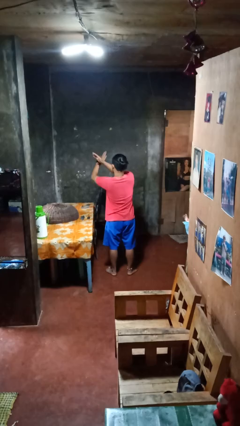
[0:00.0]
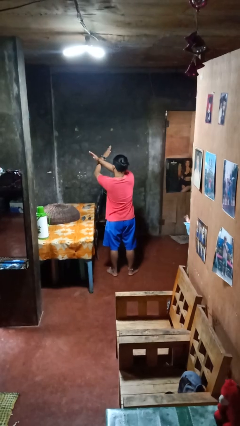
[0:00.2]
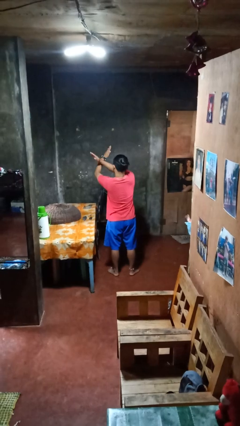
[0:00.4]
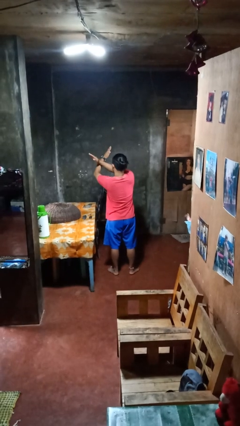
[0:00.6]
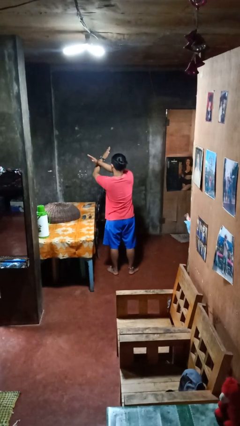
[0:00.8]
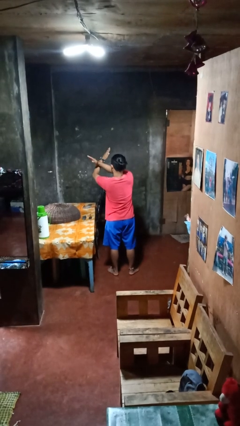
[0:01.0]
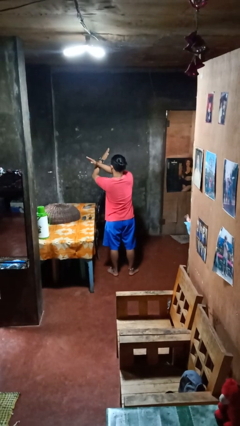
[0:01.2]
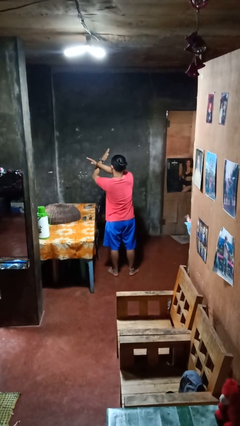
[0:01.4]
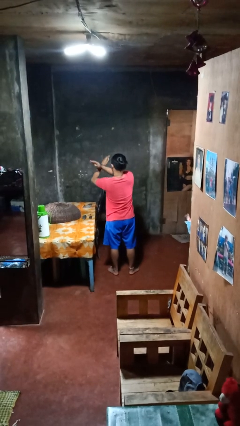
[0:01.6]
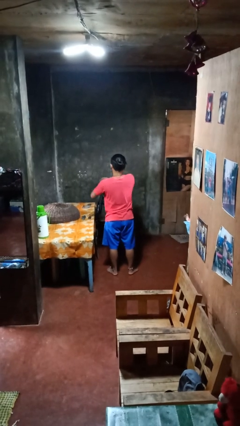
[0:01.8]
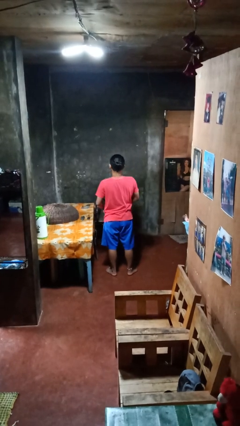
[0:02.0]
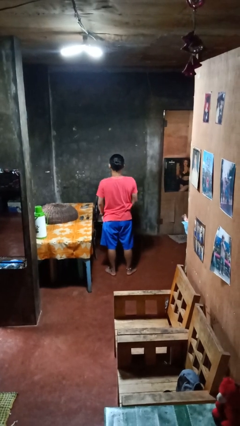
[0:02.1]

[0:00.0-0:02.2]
person gestures arms x

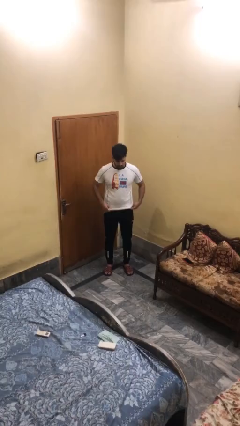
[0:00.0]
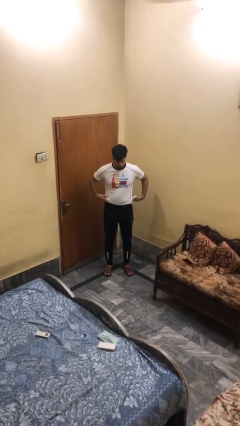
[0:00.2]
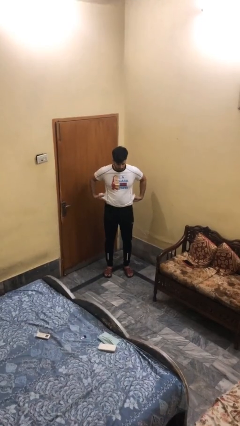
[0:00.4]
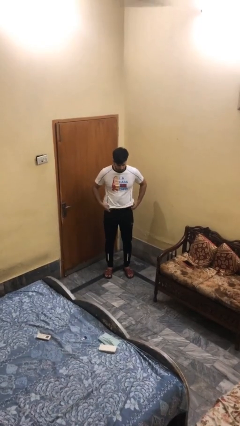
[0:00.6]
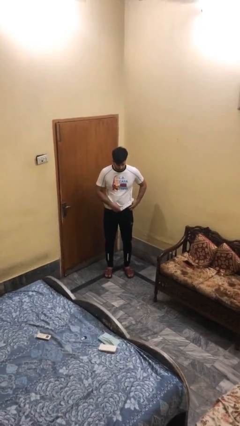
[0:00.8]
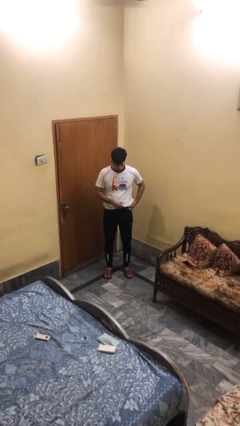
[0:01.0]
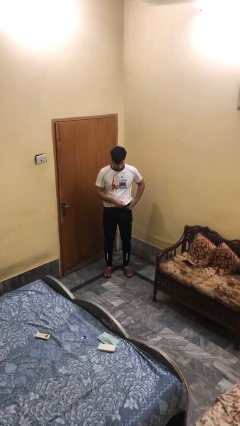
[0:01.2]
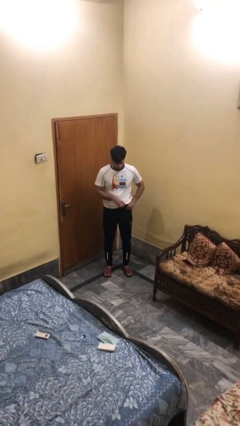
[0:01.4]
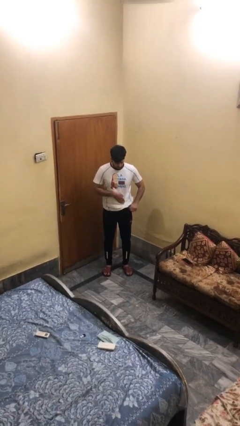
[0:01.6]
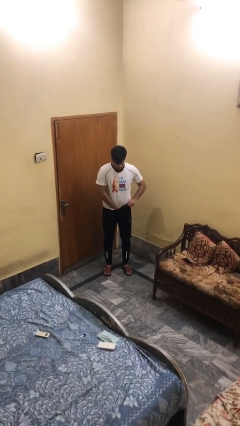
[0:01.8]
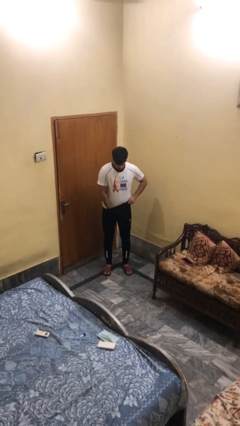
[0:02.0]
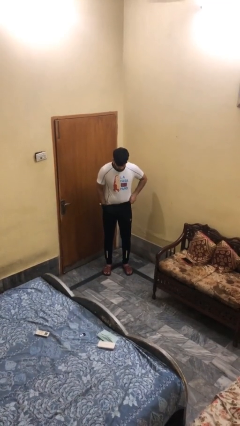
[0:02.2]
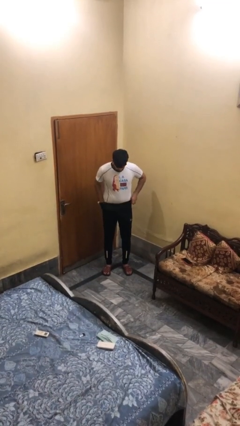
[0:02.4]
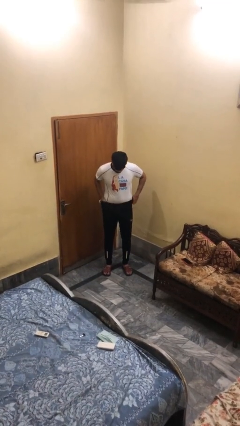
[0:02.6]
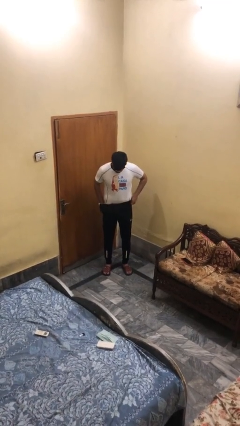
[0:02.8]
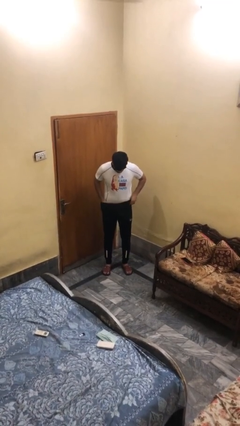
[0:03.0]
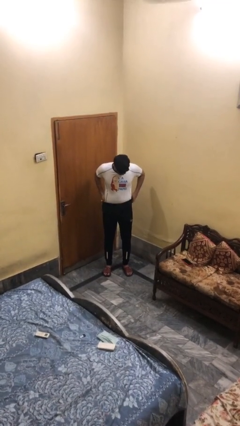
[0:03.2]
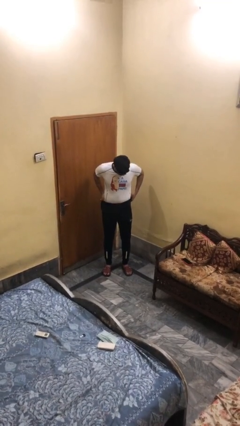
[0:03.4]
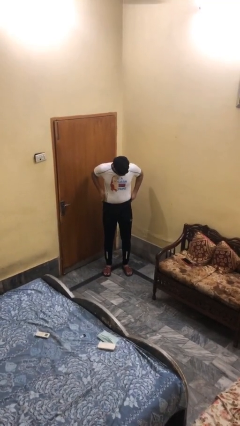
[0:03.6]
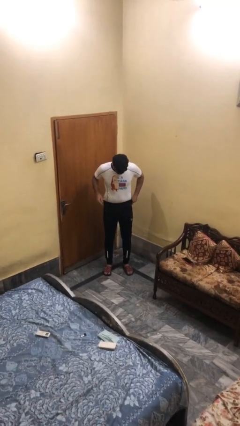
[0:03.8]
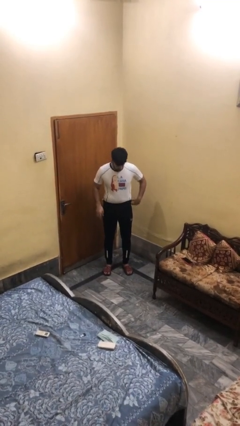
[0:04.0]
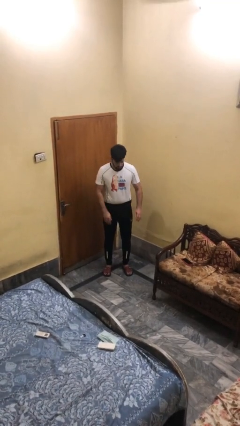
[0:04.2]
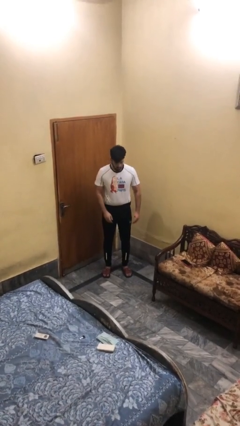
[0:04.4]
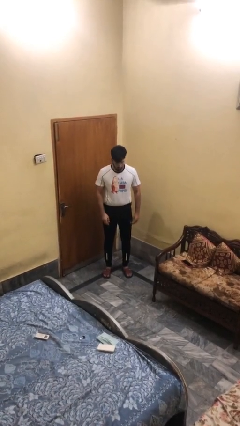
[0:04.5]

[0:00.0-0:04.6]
person tucks in shirt

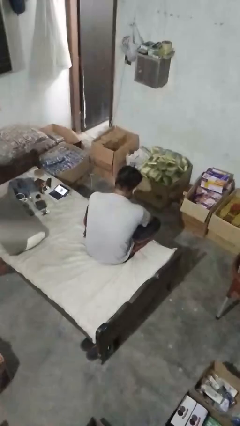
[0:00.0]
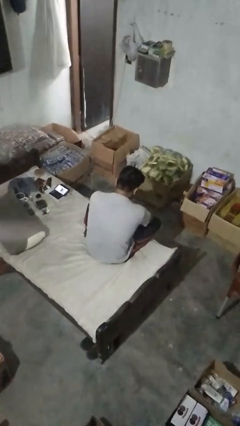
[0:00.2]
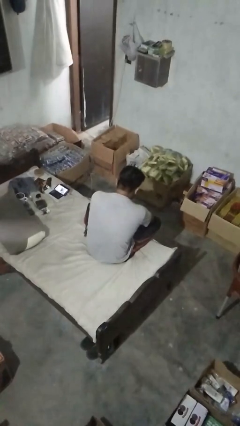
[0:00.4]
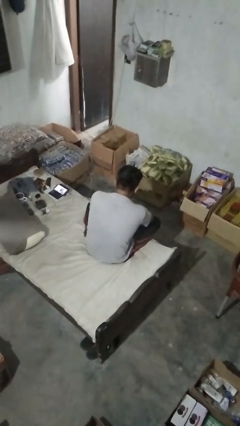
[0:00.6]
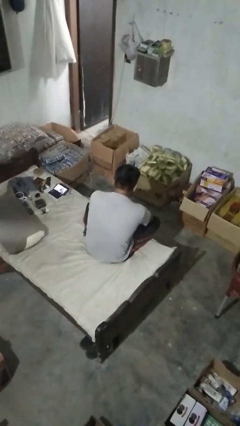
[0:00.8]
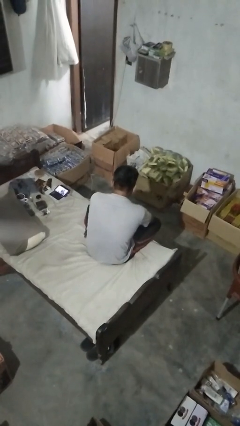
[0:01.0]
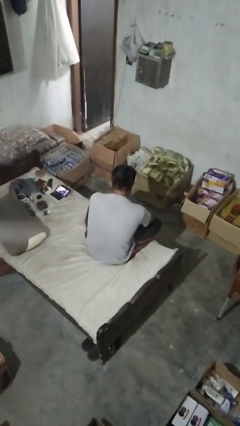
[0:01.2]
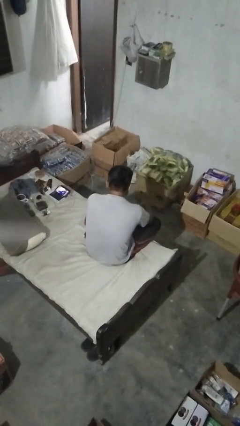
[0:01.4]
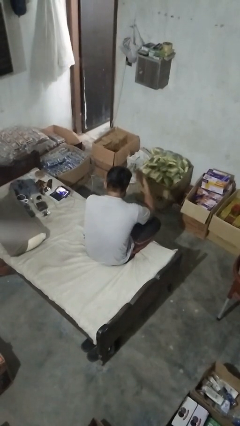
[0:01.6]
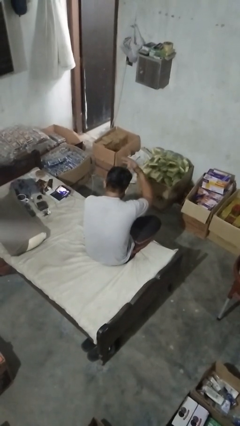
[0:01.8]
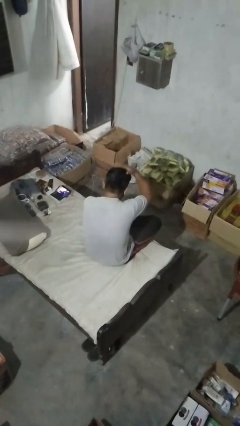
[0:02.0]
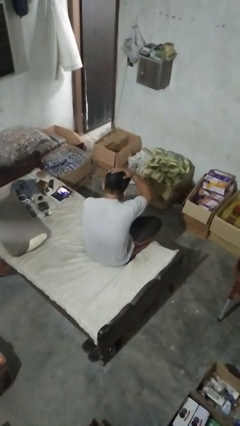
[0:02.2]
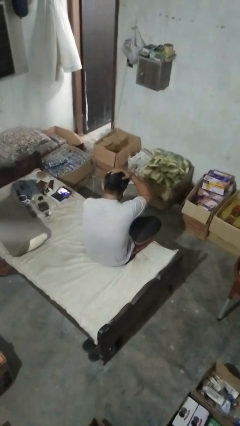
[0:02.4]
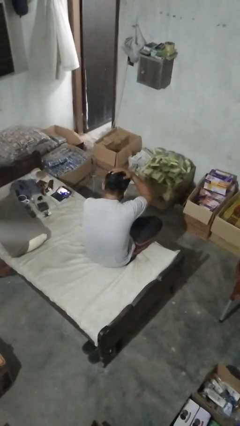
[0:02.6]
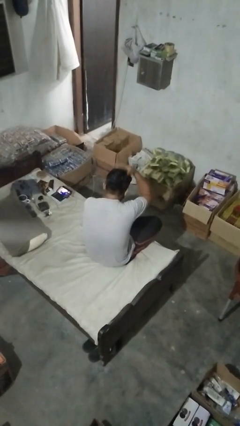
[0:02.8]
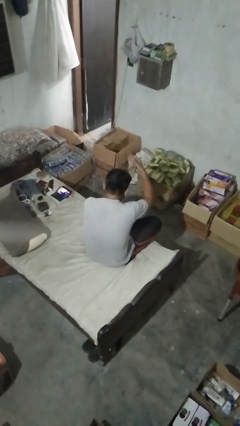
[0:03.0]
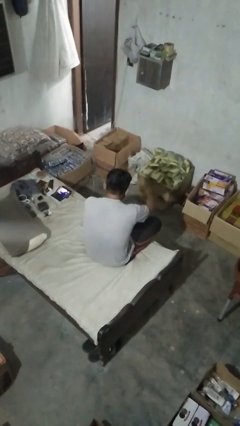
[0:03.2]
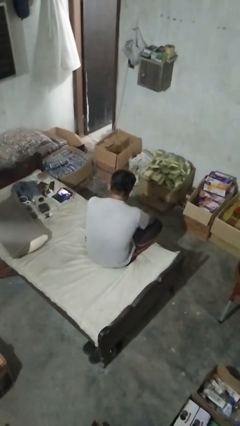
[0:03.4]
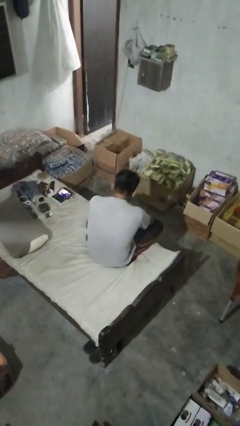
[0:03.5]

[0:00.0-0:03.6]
person pats head

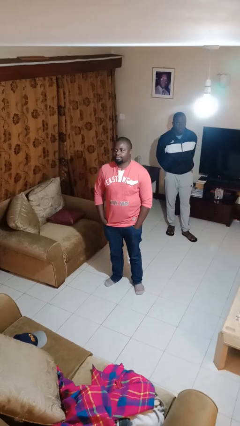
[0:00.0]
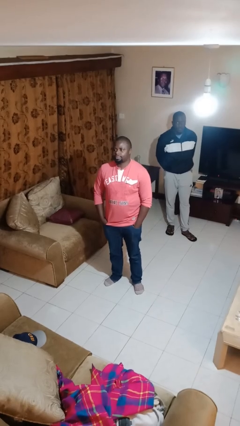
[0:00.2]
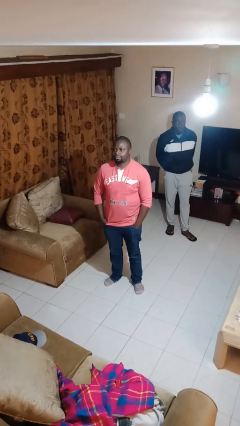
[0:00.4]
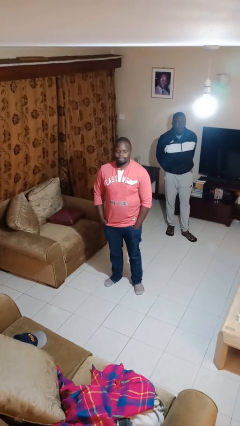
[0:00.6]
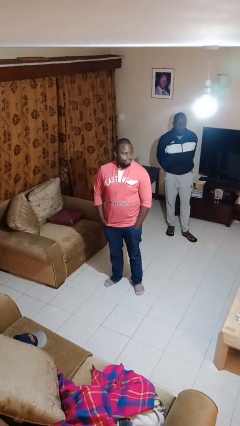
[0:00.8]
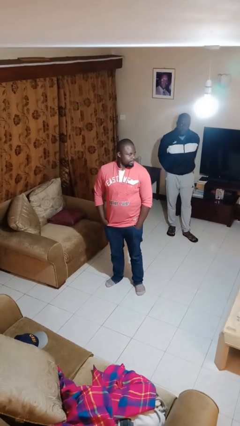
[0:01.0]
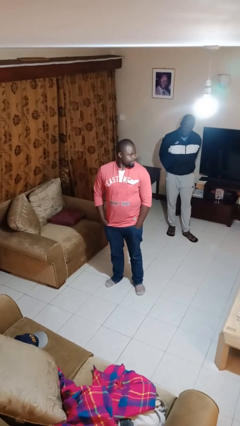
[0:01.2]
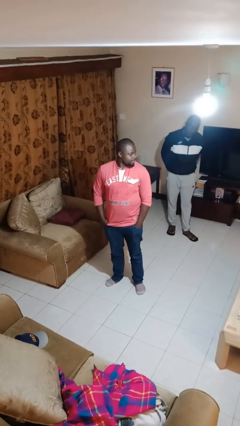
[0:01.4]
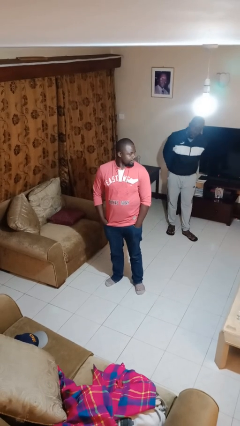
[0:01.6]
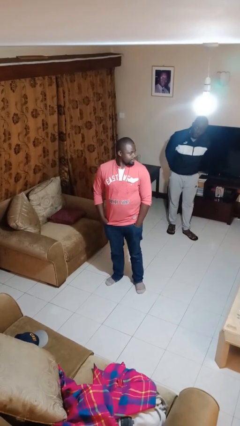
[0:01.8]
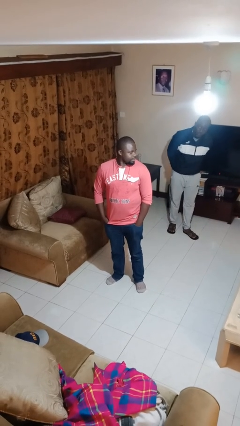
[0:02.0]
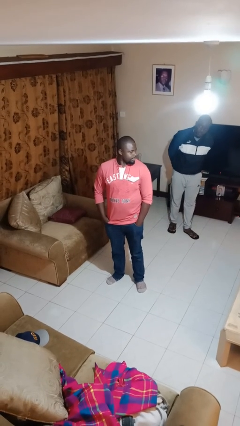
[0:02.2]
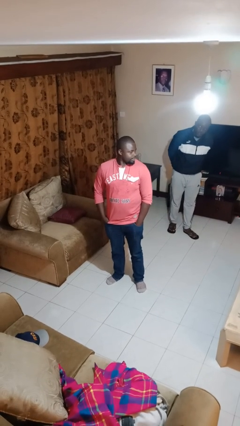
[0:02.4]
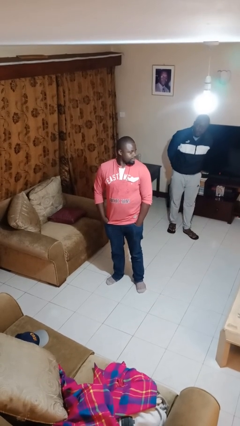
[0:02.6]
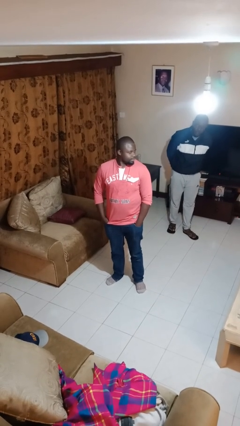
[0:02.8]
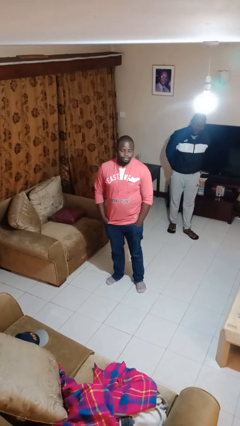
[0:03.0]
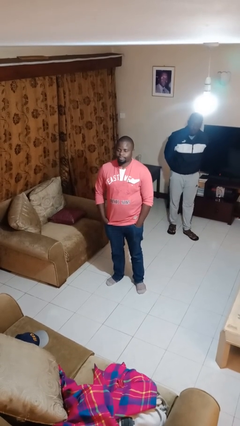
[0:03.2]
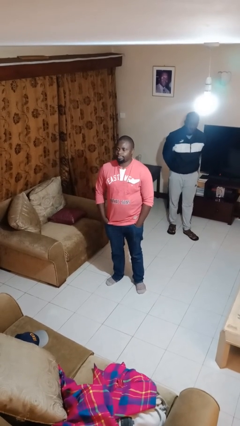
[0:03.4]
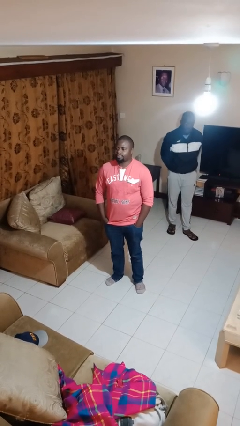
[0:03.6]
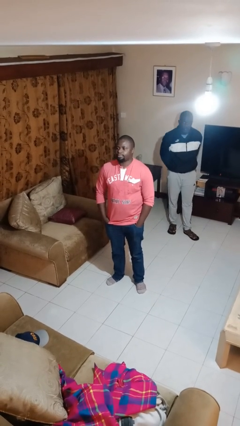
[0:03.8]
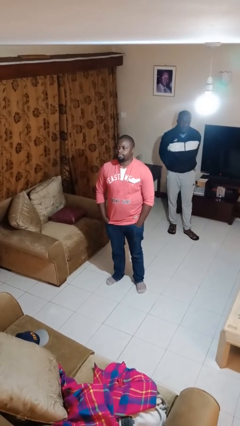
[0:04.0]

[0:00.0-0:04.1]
person looks over shoulder

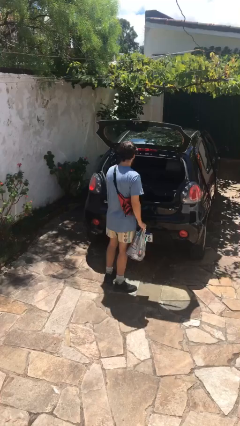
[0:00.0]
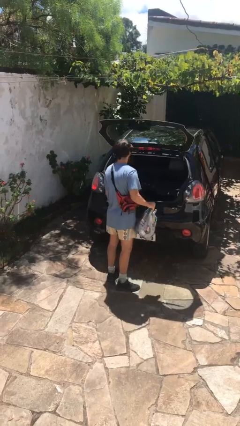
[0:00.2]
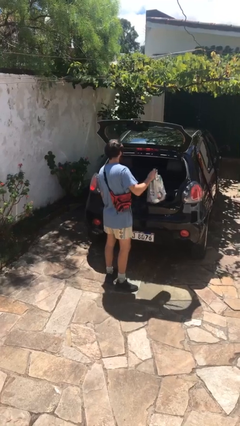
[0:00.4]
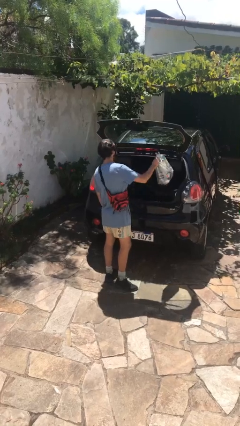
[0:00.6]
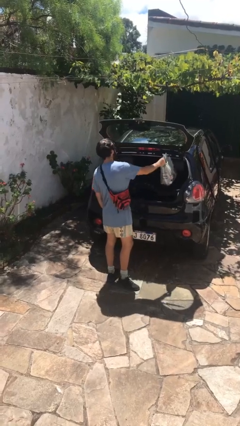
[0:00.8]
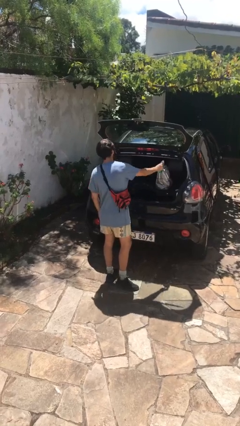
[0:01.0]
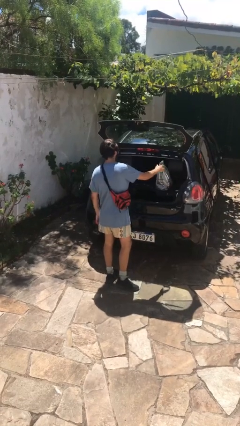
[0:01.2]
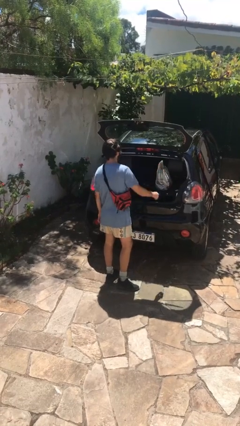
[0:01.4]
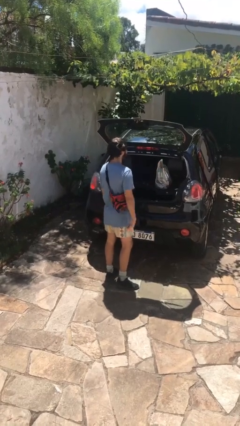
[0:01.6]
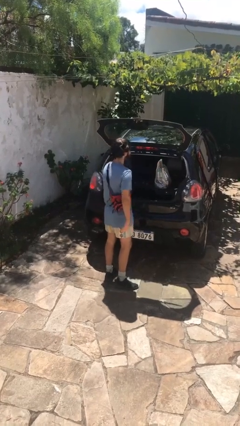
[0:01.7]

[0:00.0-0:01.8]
person loads car

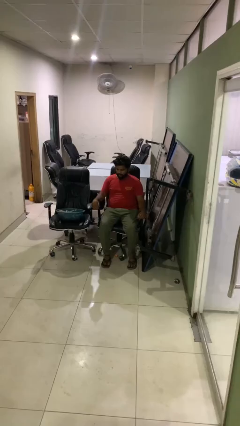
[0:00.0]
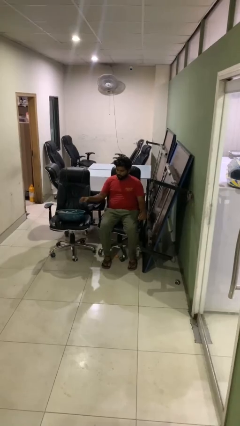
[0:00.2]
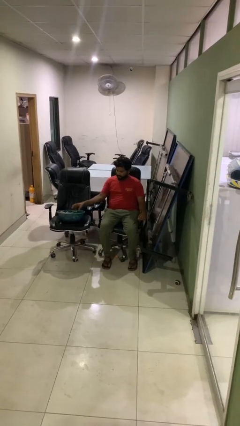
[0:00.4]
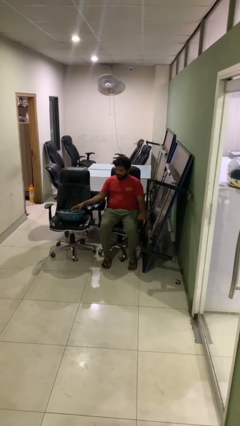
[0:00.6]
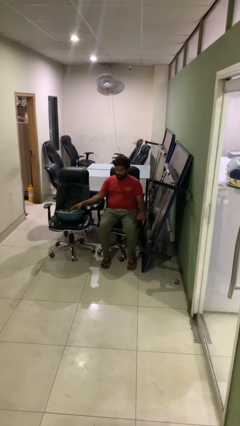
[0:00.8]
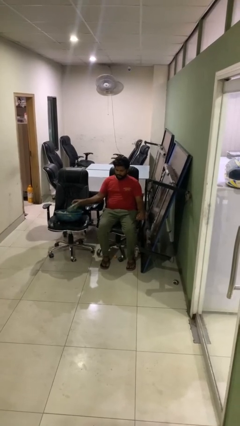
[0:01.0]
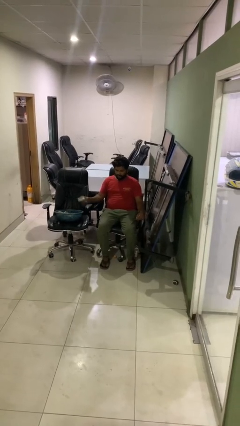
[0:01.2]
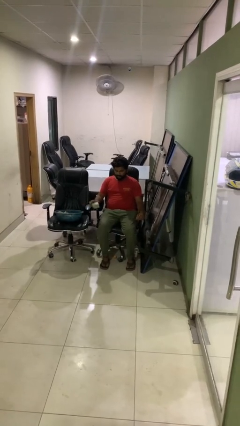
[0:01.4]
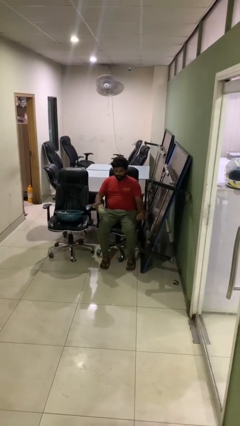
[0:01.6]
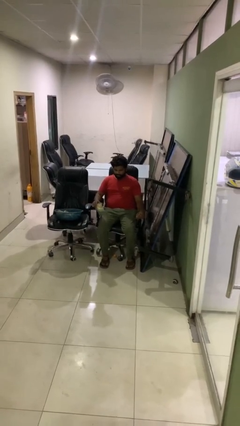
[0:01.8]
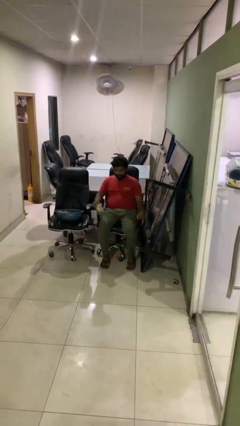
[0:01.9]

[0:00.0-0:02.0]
person takes object from basket
